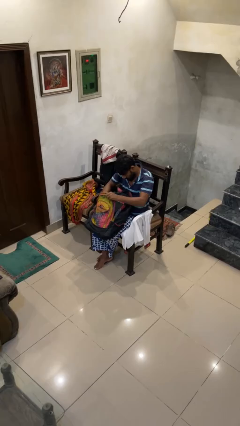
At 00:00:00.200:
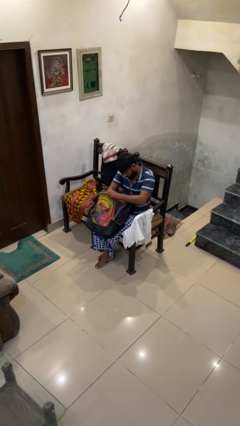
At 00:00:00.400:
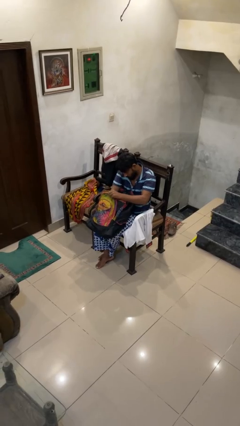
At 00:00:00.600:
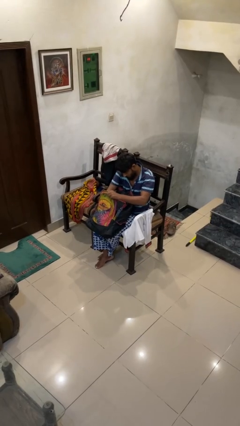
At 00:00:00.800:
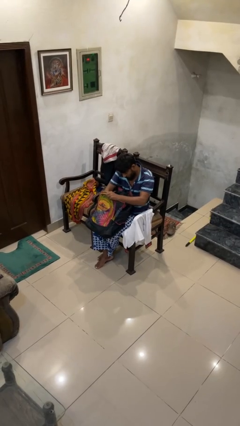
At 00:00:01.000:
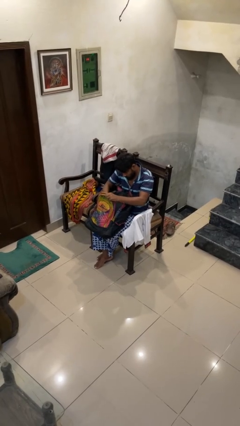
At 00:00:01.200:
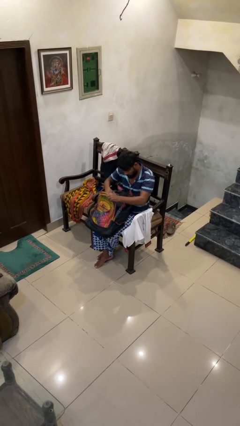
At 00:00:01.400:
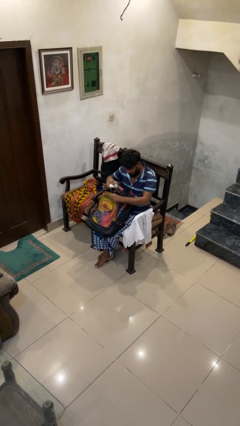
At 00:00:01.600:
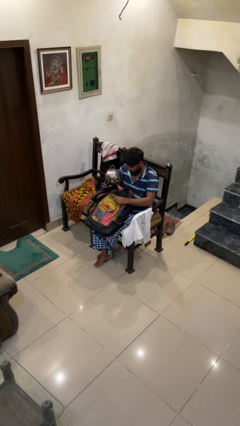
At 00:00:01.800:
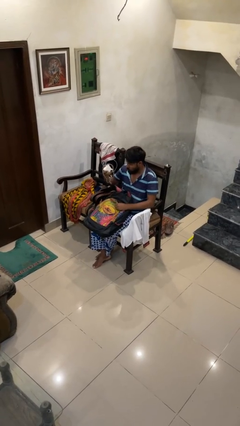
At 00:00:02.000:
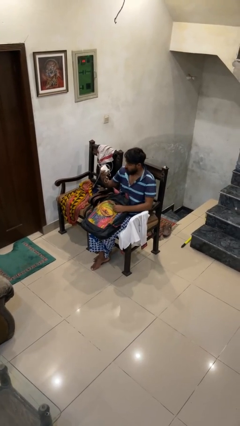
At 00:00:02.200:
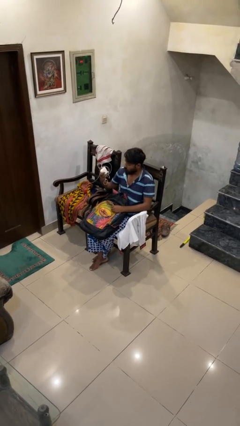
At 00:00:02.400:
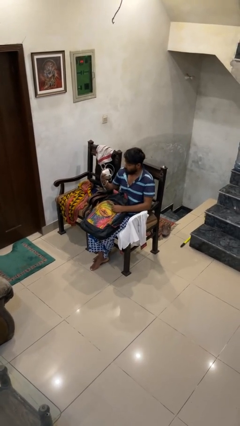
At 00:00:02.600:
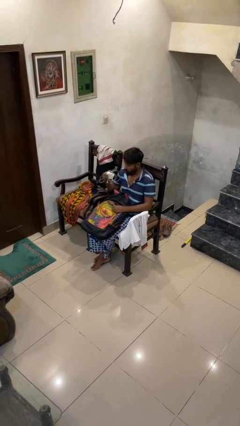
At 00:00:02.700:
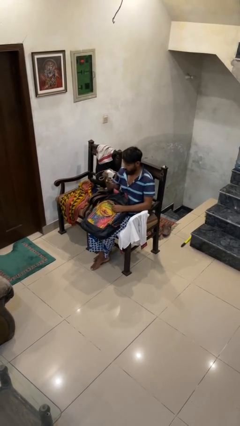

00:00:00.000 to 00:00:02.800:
person takes object from backpack

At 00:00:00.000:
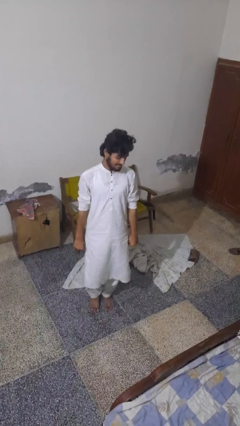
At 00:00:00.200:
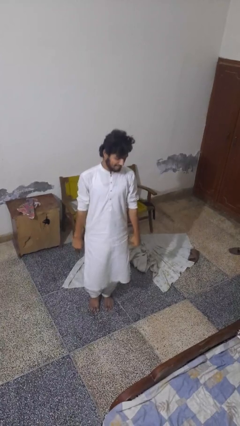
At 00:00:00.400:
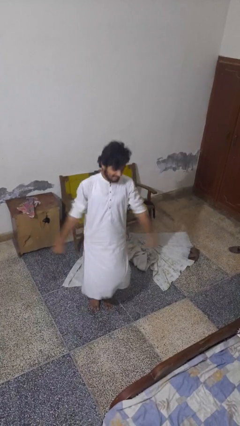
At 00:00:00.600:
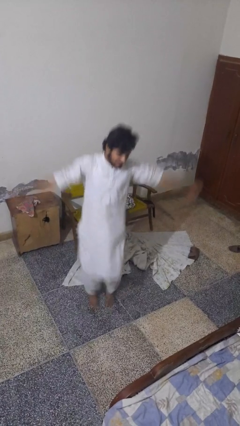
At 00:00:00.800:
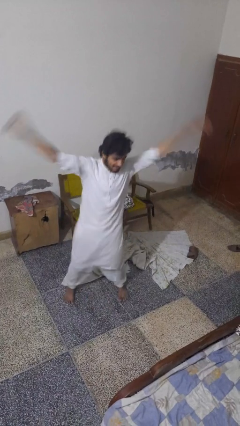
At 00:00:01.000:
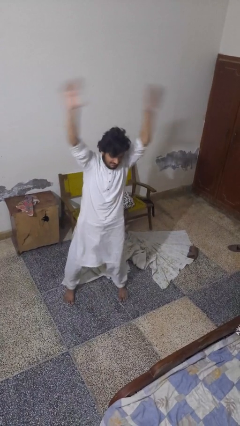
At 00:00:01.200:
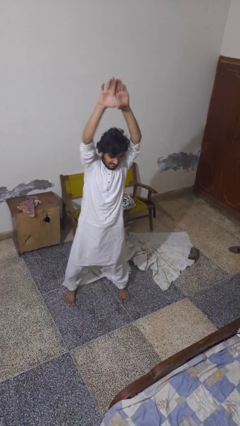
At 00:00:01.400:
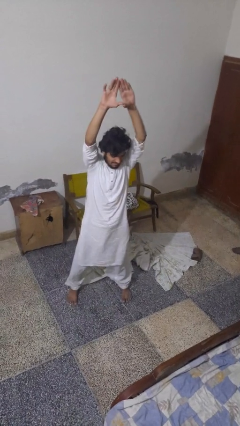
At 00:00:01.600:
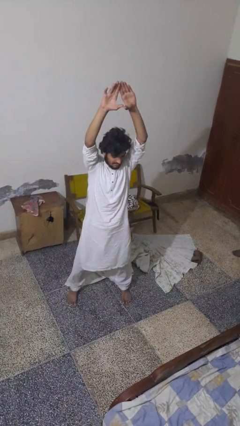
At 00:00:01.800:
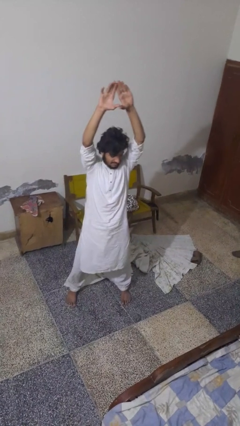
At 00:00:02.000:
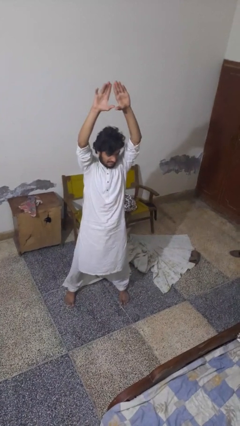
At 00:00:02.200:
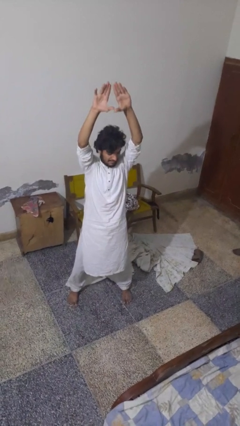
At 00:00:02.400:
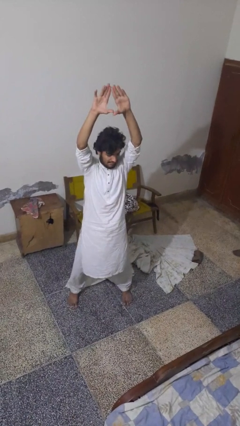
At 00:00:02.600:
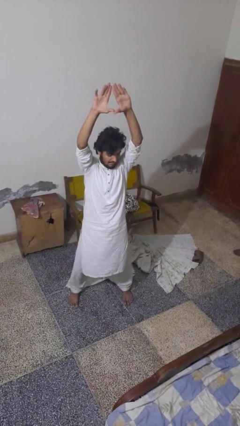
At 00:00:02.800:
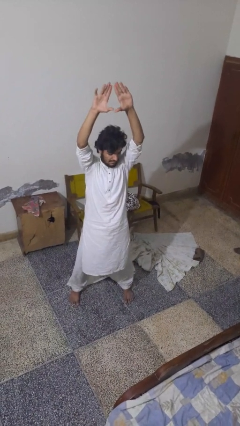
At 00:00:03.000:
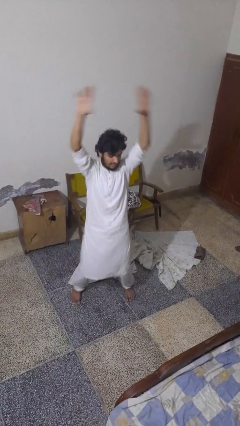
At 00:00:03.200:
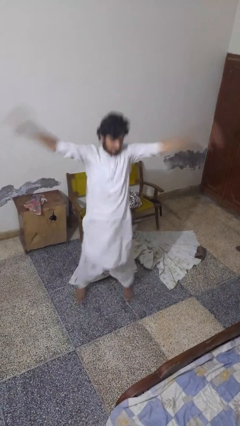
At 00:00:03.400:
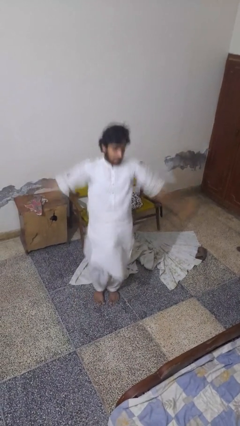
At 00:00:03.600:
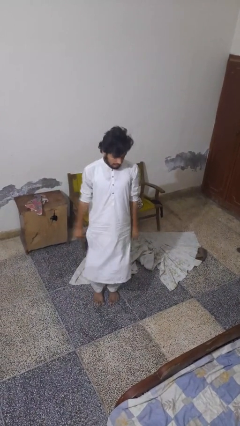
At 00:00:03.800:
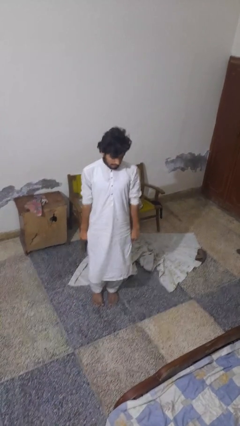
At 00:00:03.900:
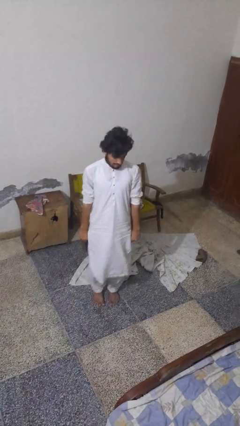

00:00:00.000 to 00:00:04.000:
person exercises with jumping jacks

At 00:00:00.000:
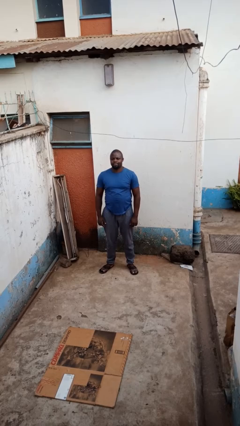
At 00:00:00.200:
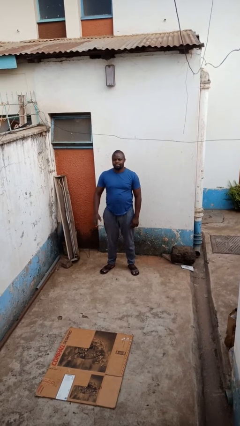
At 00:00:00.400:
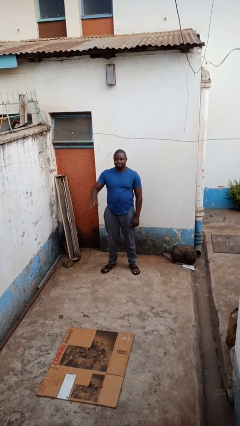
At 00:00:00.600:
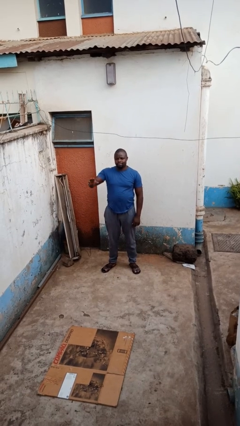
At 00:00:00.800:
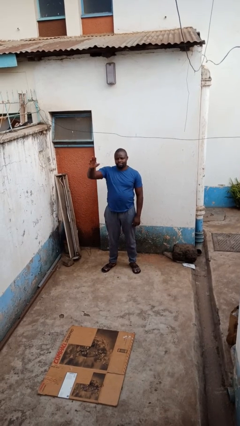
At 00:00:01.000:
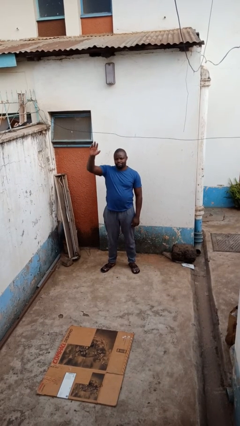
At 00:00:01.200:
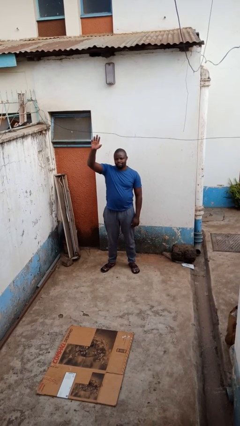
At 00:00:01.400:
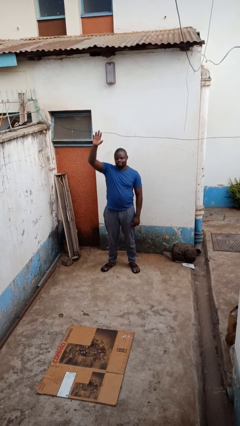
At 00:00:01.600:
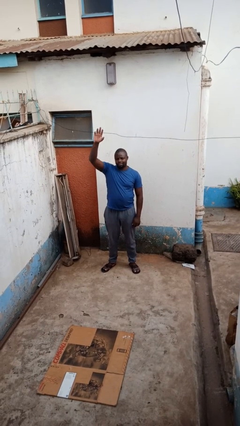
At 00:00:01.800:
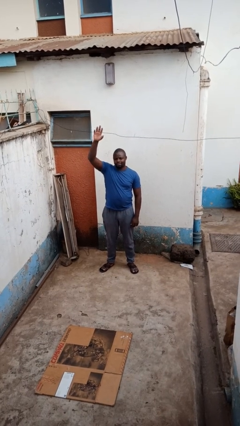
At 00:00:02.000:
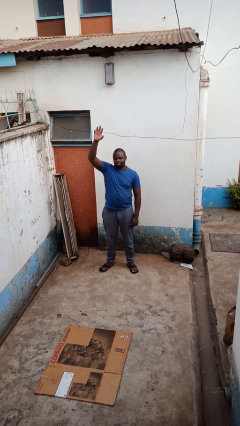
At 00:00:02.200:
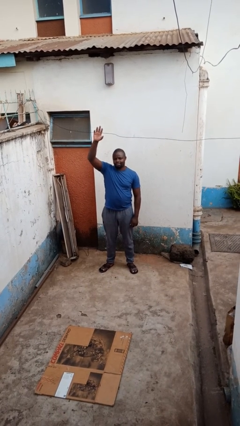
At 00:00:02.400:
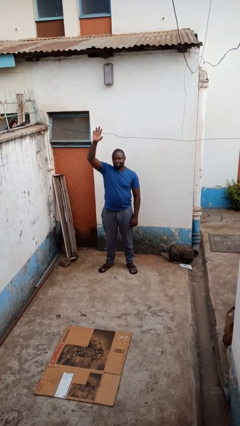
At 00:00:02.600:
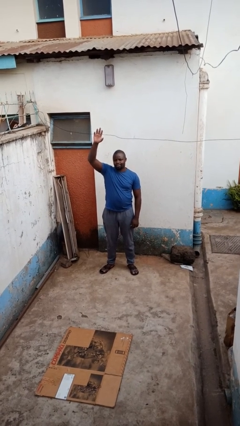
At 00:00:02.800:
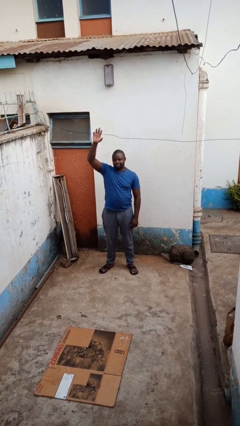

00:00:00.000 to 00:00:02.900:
person gestures raise hand

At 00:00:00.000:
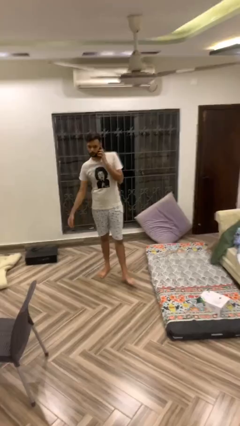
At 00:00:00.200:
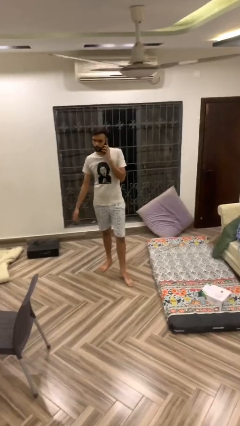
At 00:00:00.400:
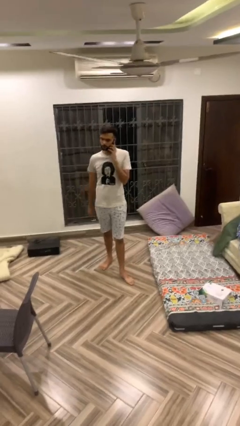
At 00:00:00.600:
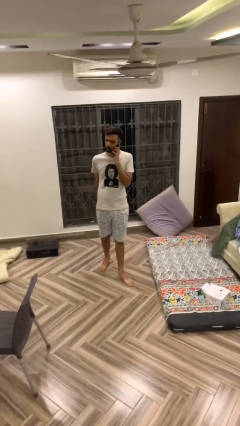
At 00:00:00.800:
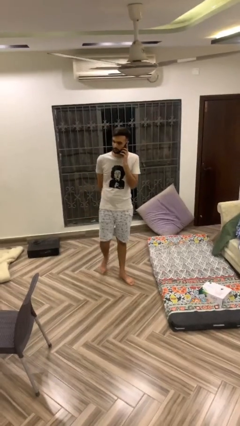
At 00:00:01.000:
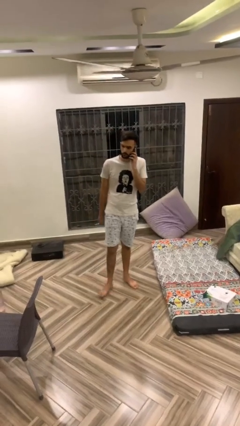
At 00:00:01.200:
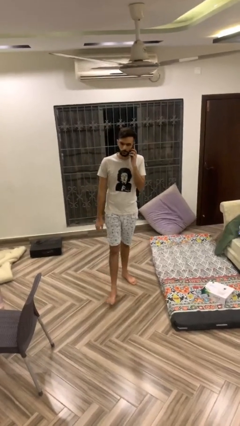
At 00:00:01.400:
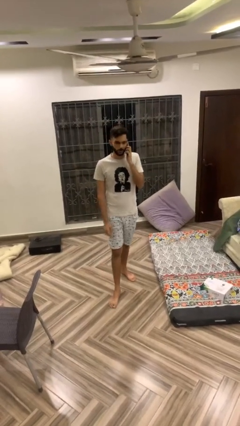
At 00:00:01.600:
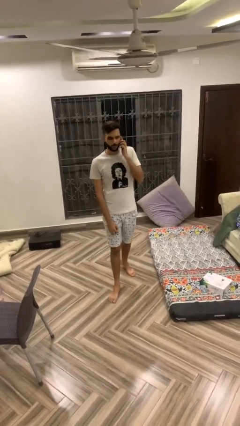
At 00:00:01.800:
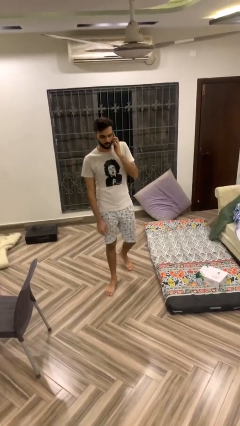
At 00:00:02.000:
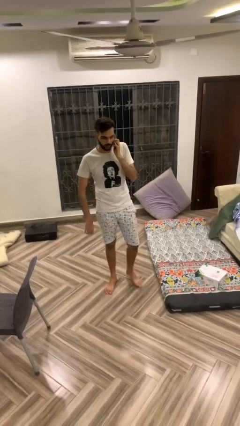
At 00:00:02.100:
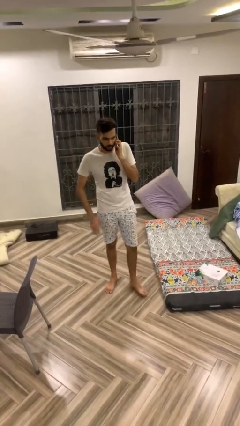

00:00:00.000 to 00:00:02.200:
person talks on phone

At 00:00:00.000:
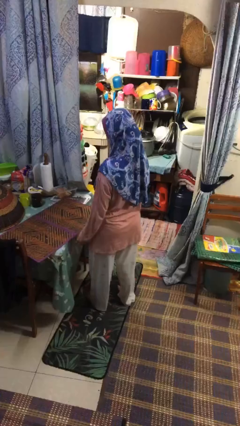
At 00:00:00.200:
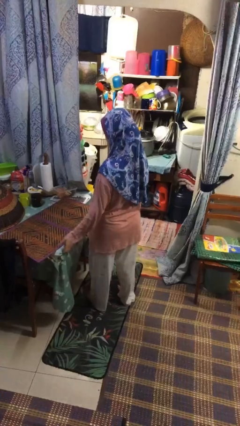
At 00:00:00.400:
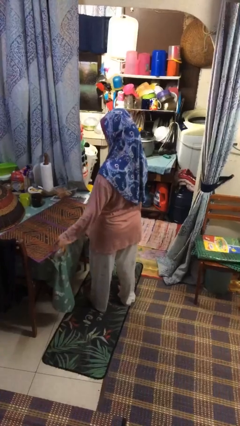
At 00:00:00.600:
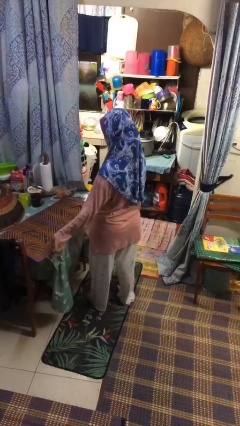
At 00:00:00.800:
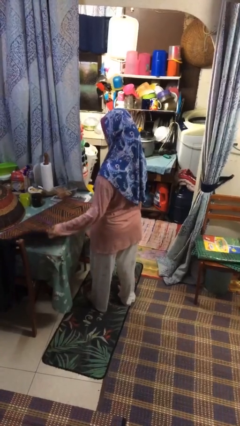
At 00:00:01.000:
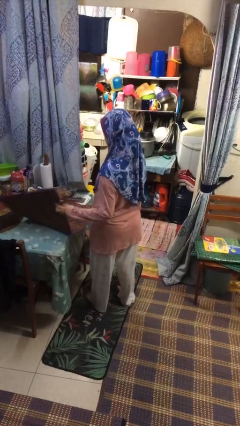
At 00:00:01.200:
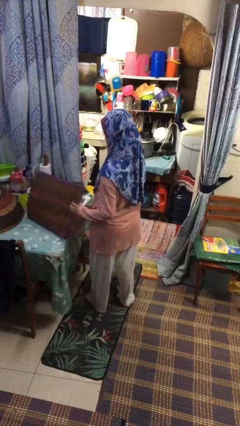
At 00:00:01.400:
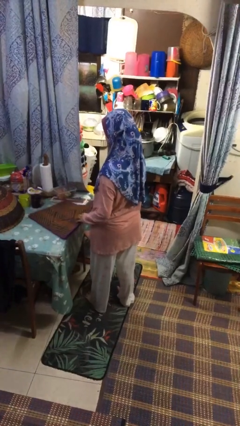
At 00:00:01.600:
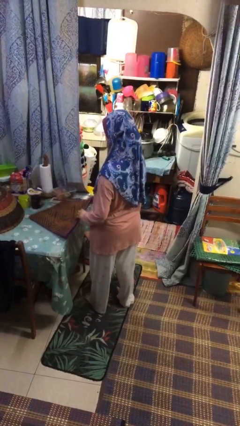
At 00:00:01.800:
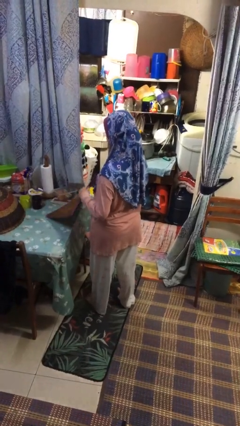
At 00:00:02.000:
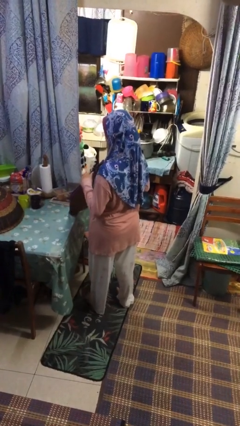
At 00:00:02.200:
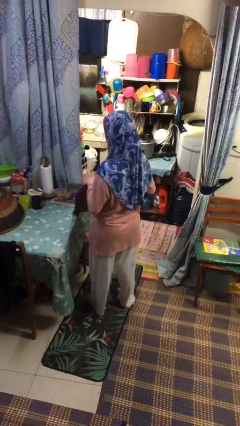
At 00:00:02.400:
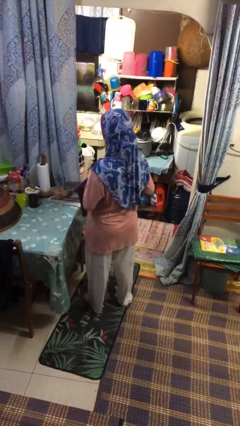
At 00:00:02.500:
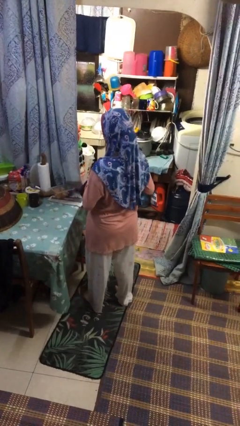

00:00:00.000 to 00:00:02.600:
person folds tablecloth

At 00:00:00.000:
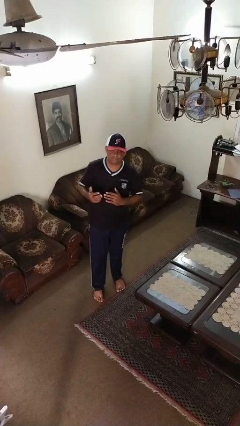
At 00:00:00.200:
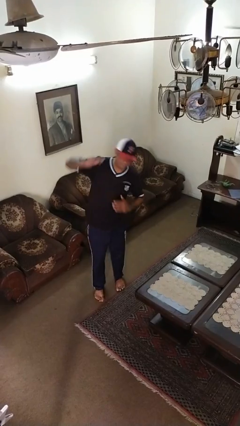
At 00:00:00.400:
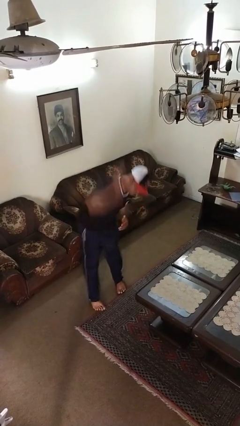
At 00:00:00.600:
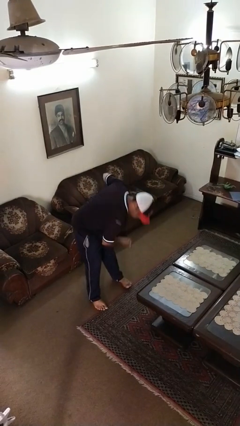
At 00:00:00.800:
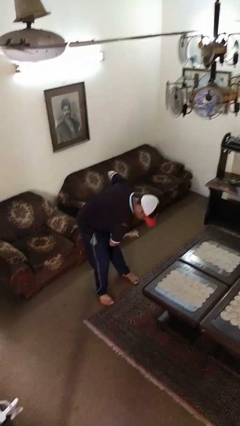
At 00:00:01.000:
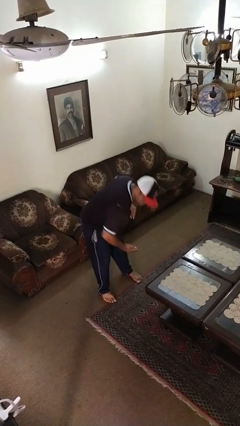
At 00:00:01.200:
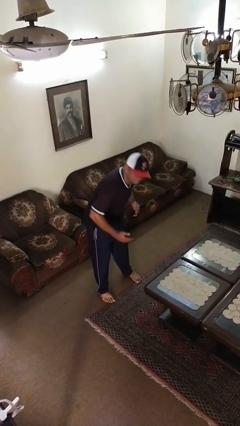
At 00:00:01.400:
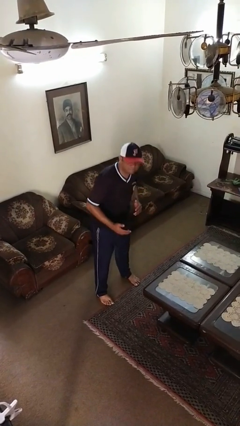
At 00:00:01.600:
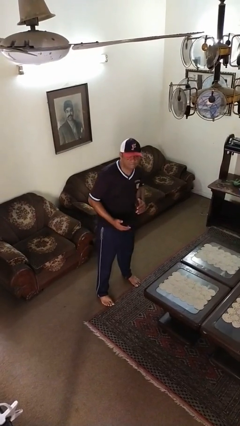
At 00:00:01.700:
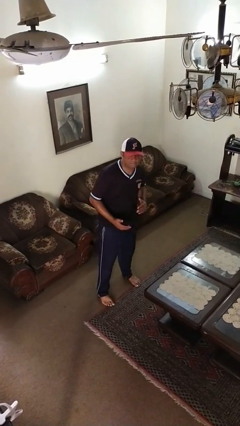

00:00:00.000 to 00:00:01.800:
person karate chop

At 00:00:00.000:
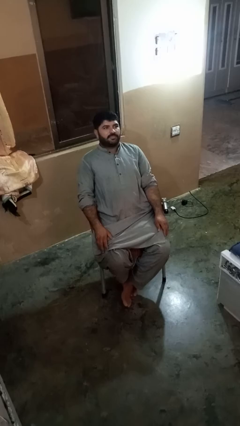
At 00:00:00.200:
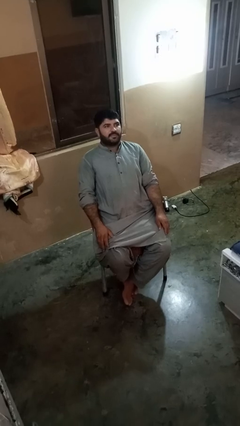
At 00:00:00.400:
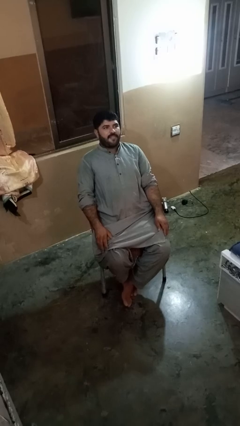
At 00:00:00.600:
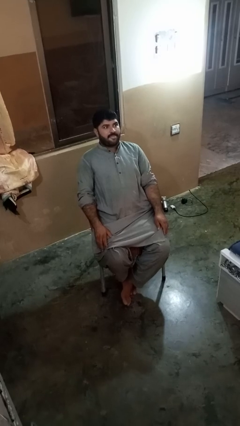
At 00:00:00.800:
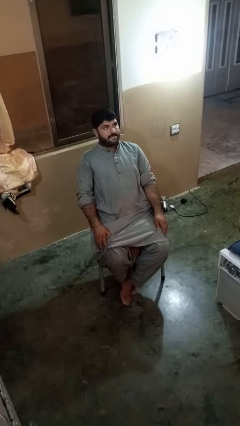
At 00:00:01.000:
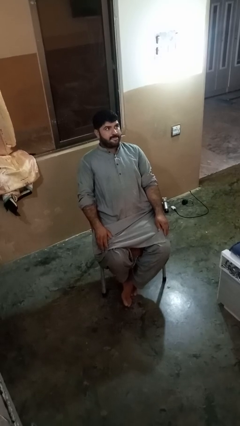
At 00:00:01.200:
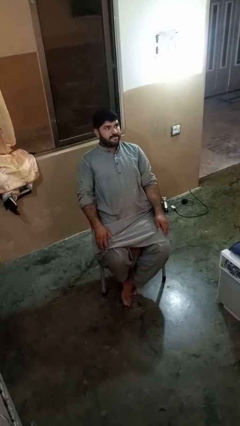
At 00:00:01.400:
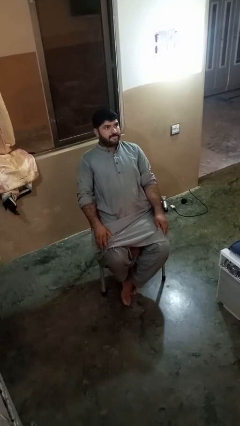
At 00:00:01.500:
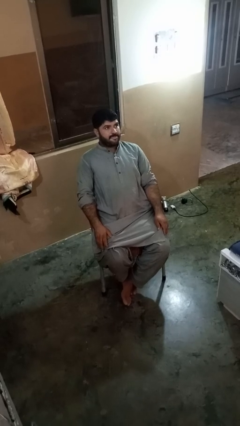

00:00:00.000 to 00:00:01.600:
person sticks out tongue
